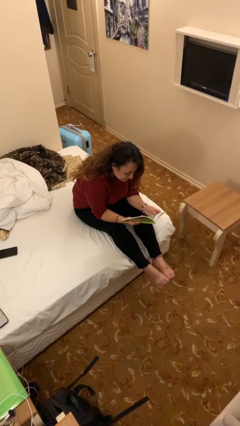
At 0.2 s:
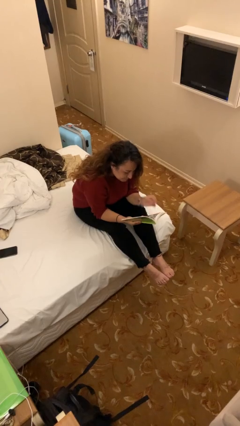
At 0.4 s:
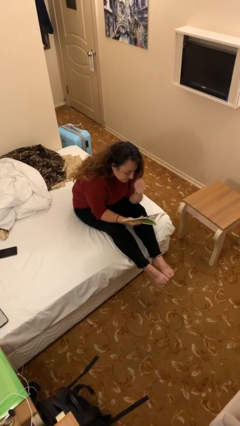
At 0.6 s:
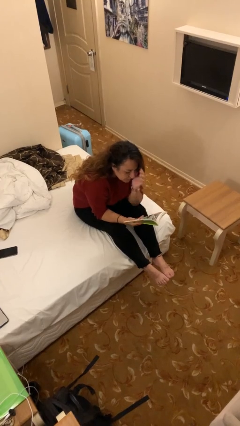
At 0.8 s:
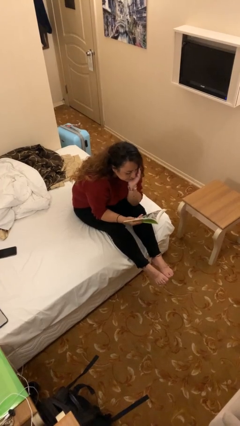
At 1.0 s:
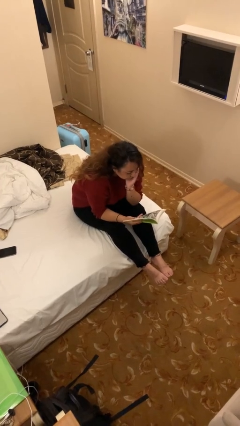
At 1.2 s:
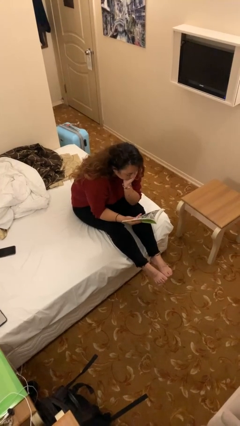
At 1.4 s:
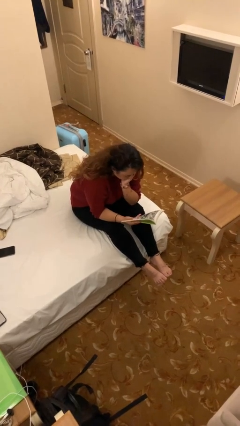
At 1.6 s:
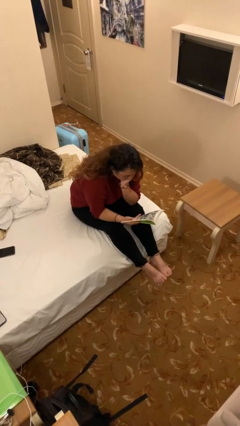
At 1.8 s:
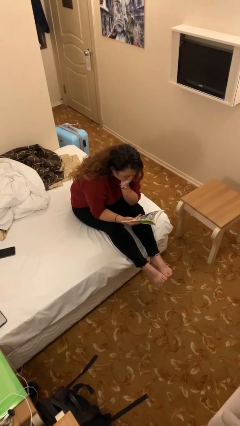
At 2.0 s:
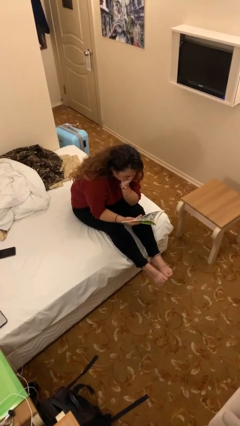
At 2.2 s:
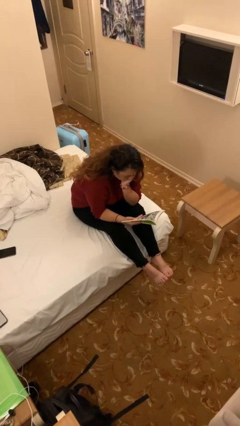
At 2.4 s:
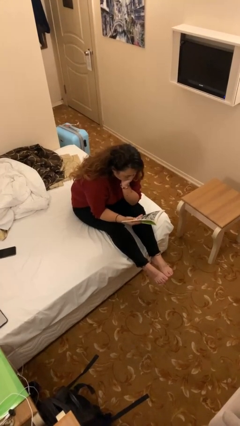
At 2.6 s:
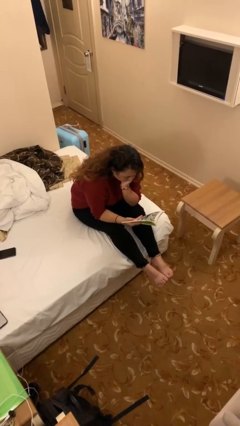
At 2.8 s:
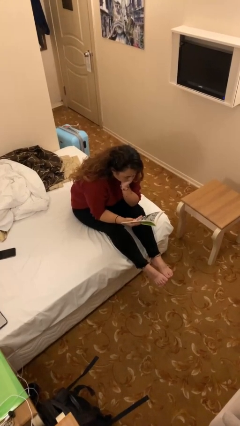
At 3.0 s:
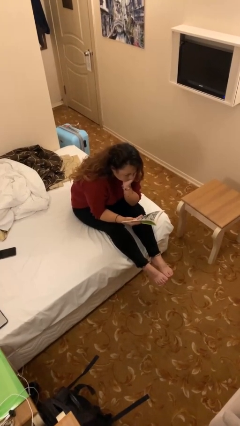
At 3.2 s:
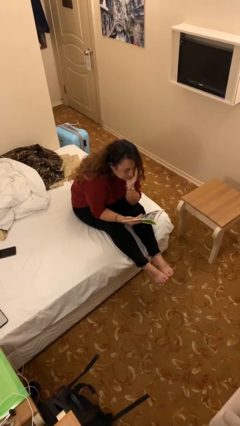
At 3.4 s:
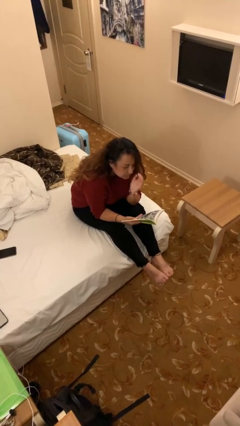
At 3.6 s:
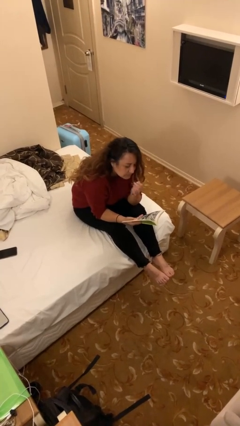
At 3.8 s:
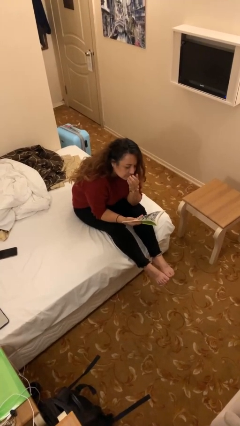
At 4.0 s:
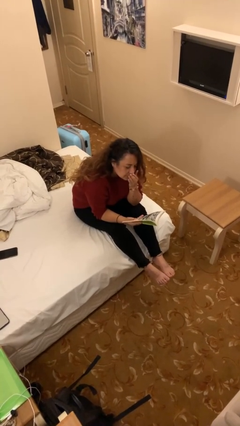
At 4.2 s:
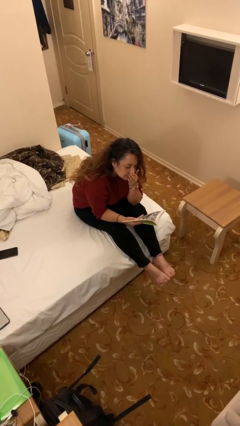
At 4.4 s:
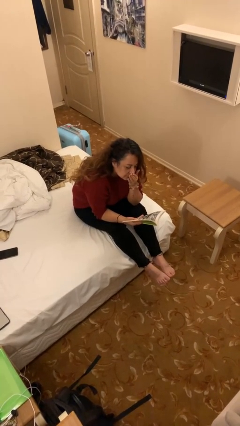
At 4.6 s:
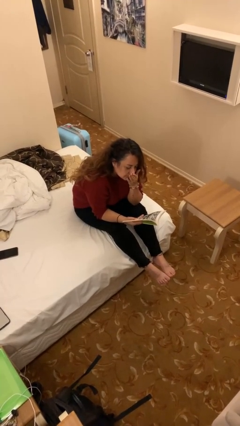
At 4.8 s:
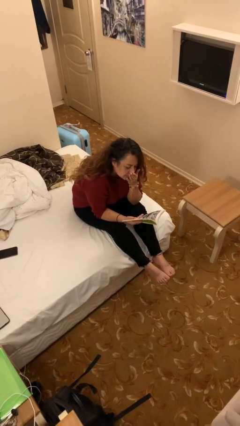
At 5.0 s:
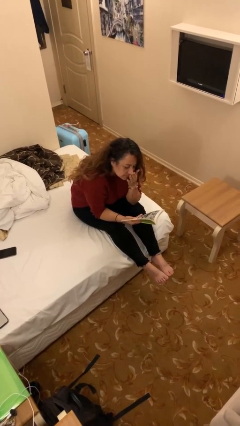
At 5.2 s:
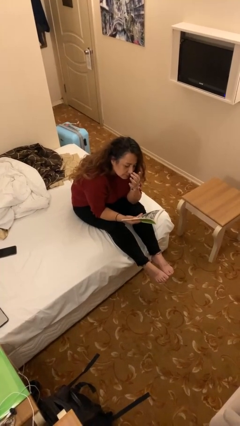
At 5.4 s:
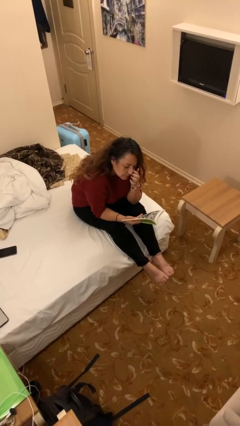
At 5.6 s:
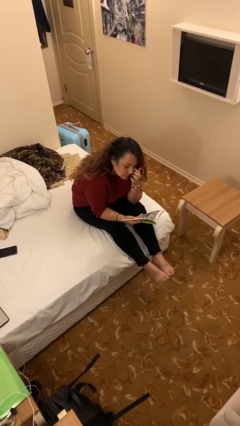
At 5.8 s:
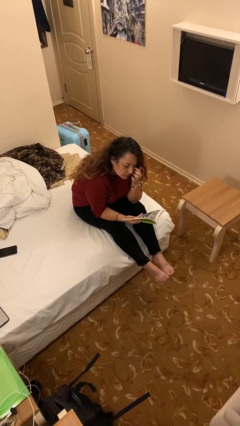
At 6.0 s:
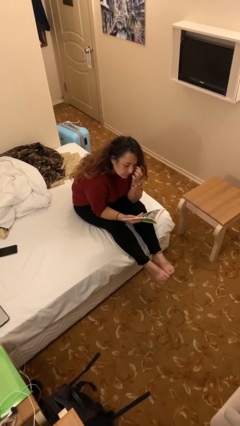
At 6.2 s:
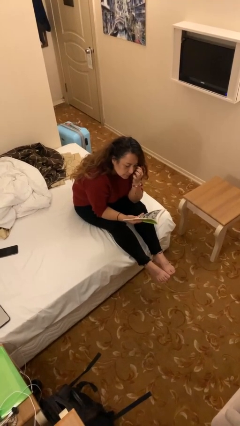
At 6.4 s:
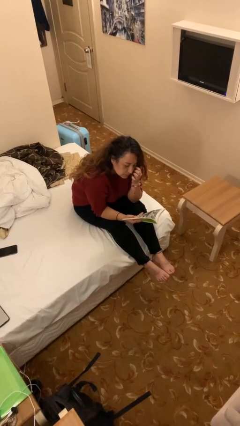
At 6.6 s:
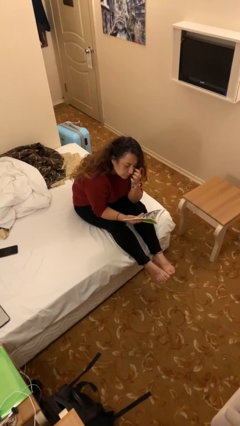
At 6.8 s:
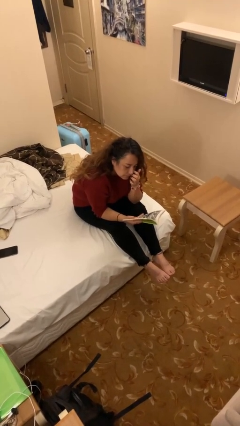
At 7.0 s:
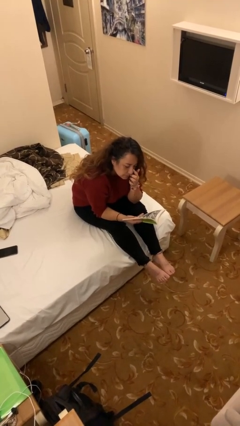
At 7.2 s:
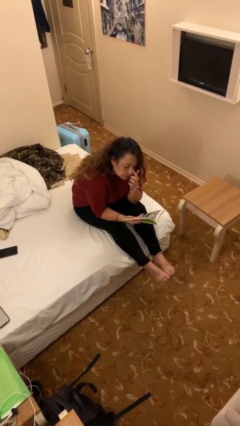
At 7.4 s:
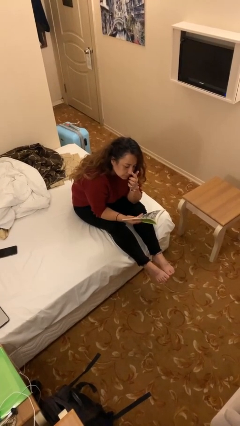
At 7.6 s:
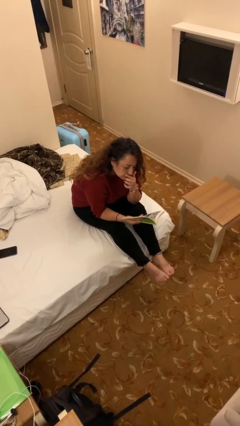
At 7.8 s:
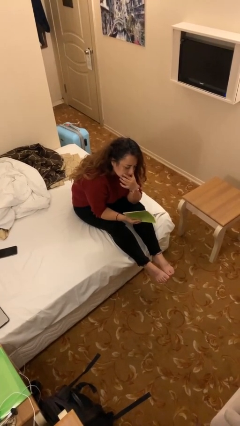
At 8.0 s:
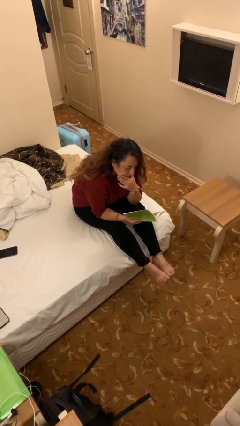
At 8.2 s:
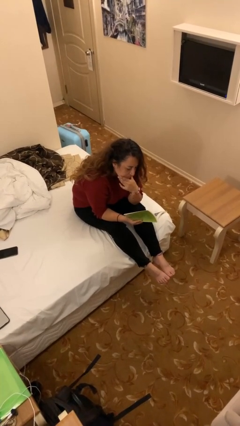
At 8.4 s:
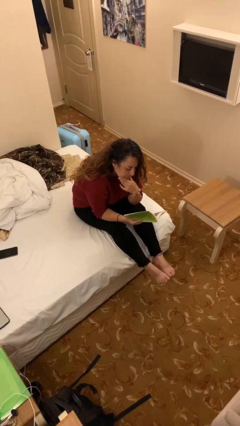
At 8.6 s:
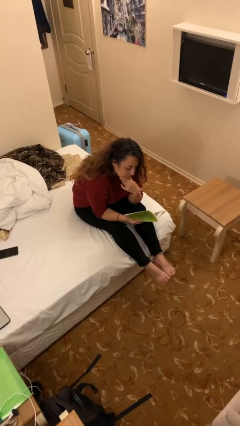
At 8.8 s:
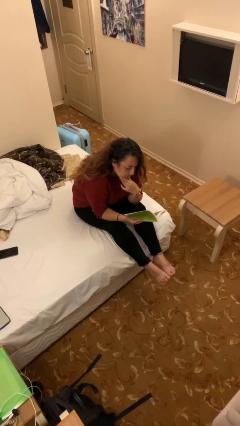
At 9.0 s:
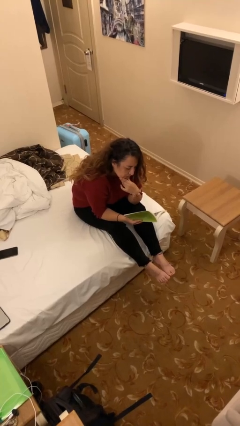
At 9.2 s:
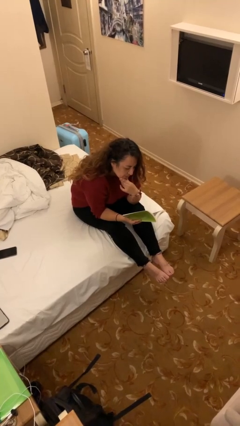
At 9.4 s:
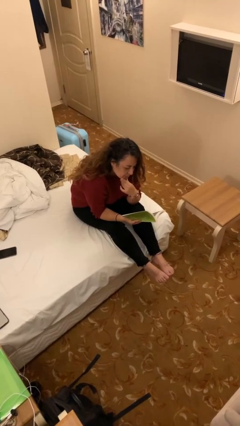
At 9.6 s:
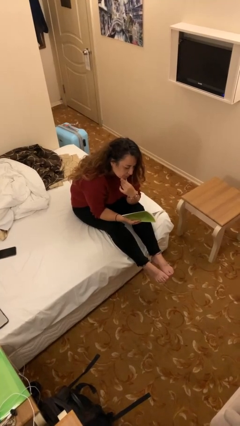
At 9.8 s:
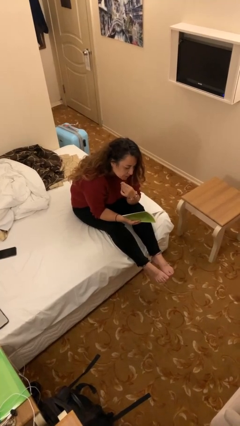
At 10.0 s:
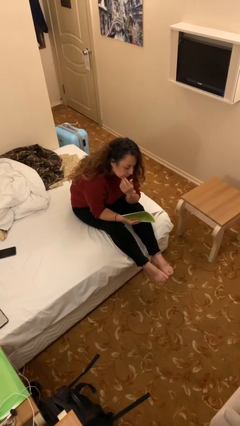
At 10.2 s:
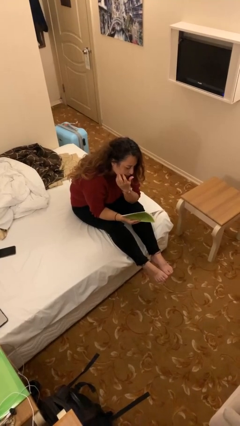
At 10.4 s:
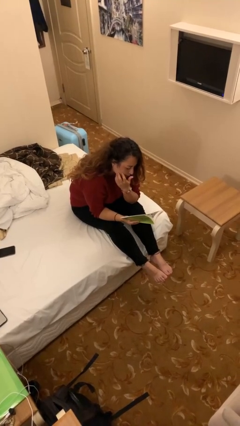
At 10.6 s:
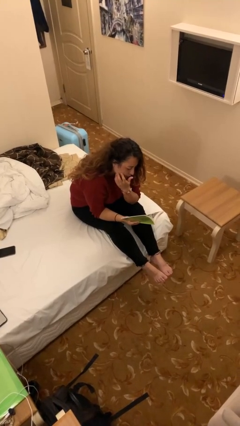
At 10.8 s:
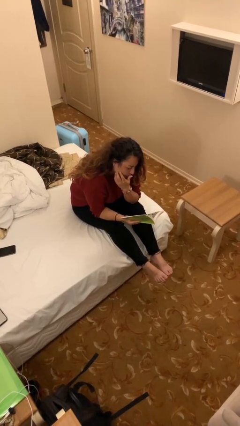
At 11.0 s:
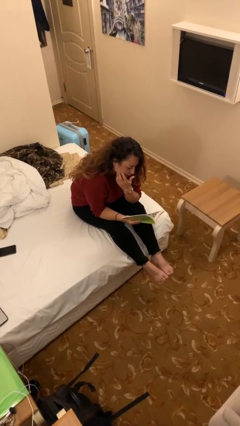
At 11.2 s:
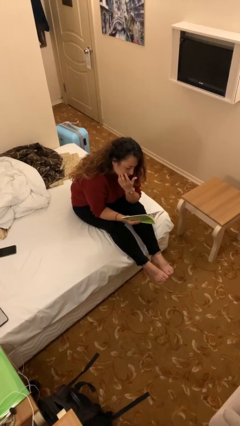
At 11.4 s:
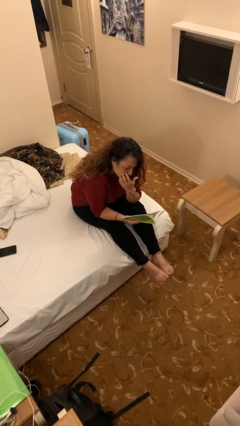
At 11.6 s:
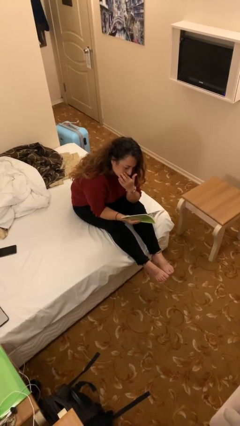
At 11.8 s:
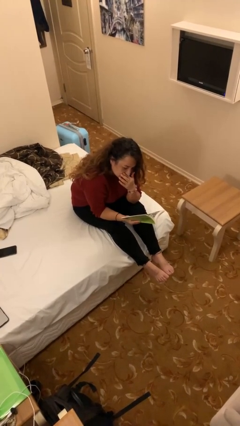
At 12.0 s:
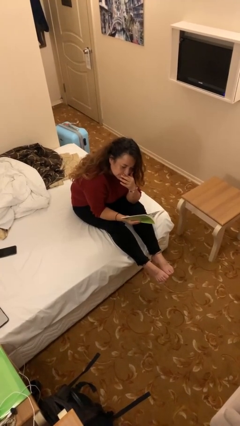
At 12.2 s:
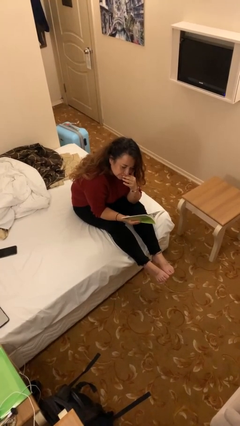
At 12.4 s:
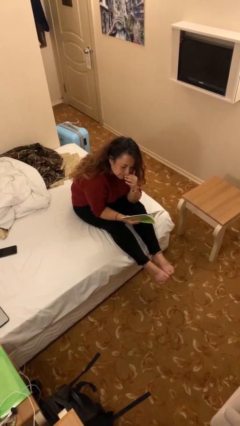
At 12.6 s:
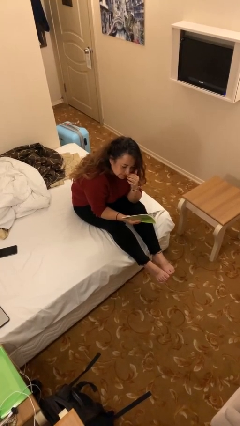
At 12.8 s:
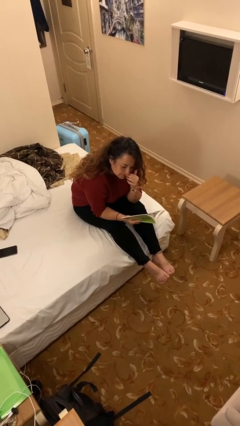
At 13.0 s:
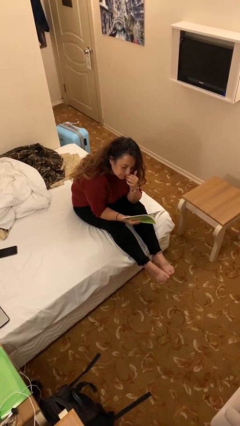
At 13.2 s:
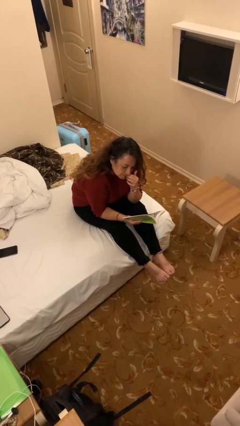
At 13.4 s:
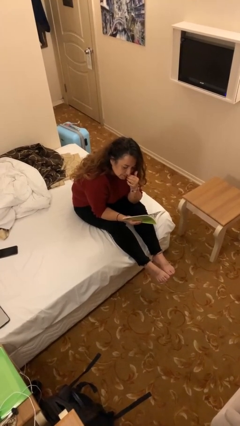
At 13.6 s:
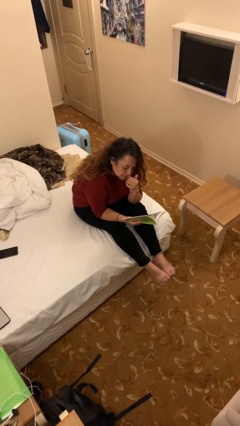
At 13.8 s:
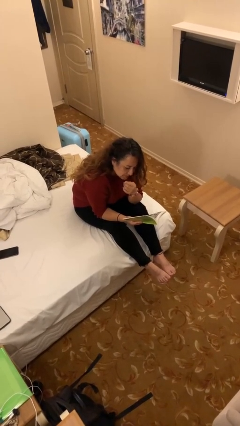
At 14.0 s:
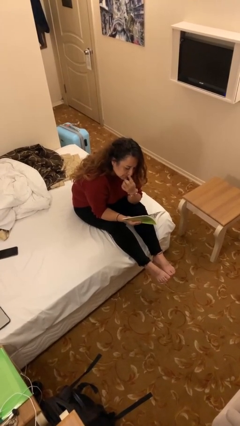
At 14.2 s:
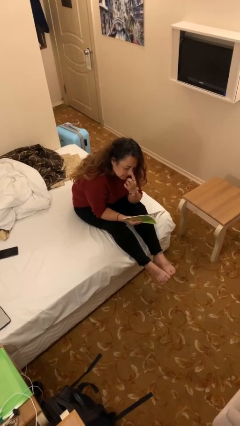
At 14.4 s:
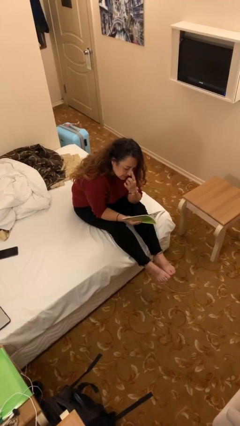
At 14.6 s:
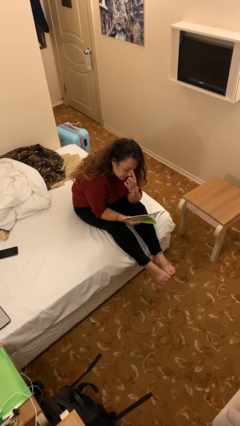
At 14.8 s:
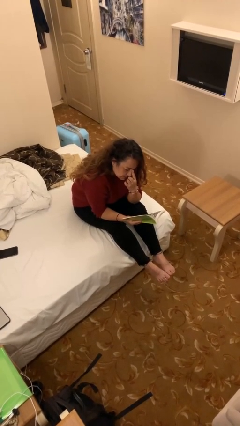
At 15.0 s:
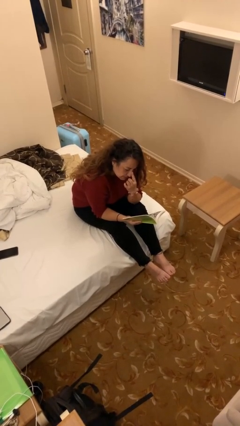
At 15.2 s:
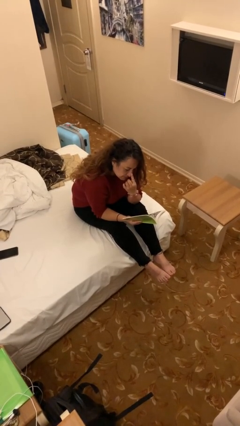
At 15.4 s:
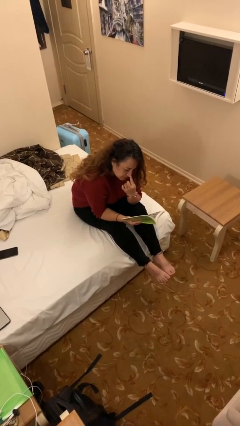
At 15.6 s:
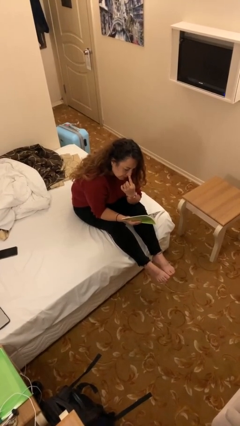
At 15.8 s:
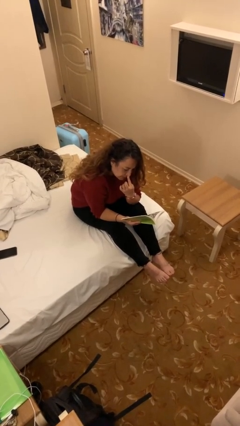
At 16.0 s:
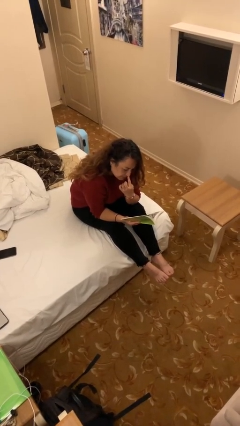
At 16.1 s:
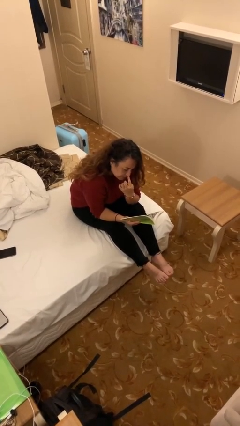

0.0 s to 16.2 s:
person reads document

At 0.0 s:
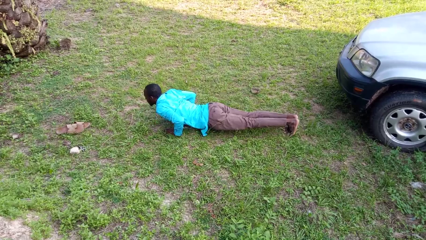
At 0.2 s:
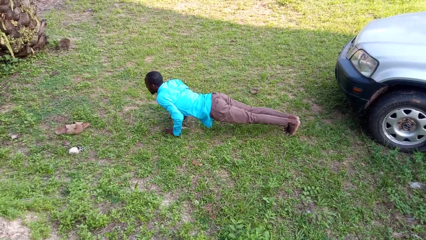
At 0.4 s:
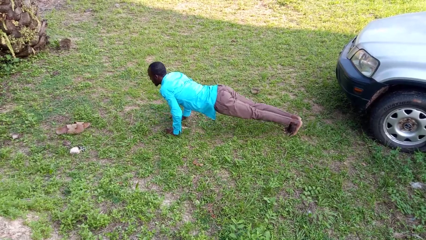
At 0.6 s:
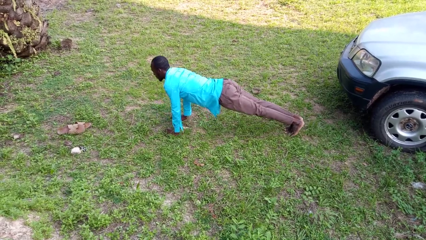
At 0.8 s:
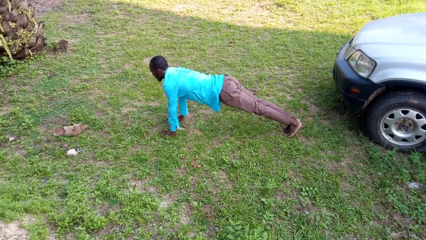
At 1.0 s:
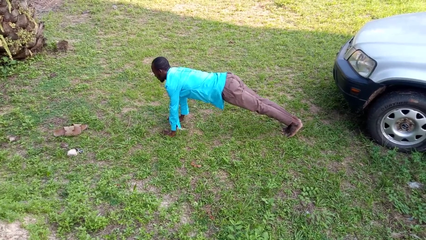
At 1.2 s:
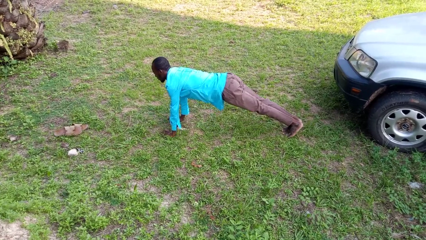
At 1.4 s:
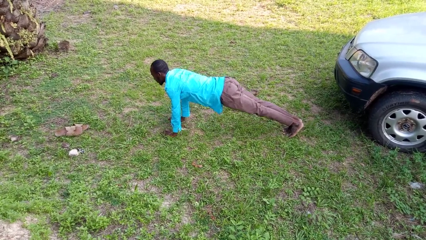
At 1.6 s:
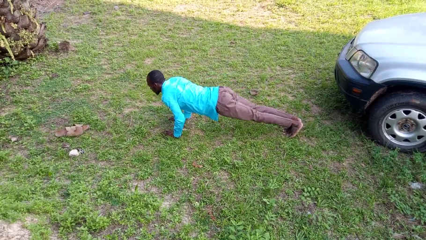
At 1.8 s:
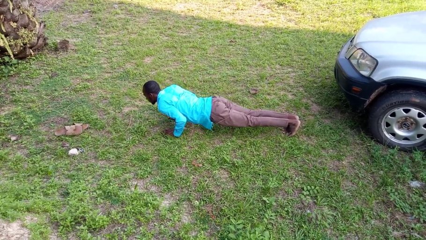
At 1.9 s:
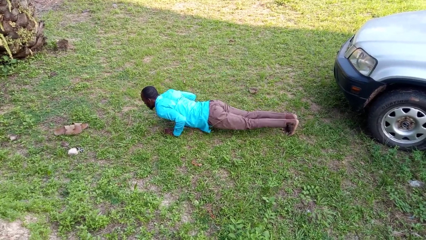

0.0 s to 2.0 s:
person exercises with pushup
